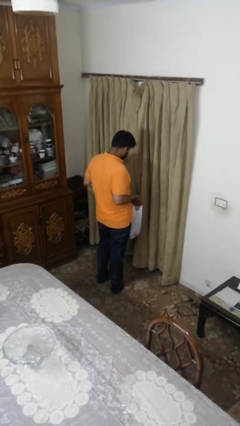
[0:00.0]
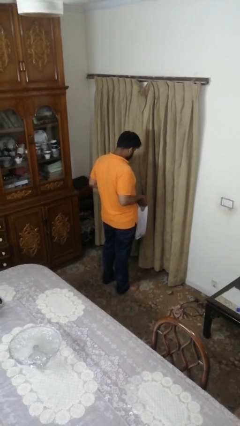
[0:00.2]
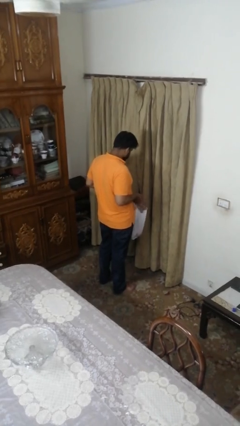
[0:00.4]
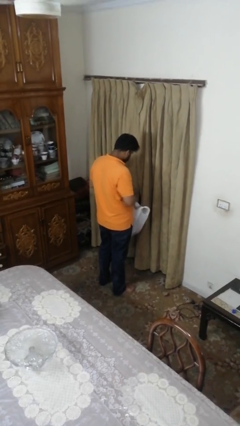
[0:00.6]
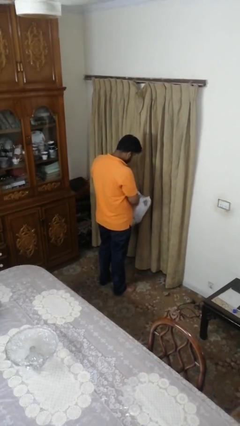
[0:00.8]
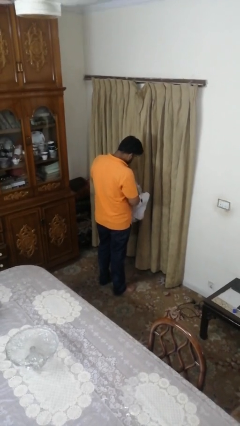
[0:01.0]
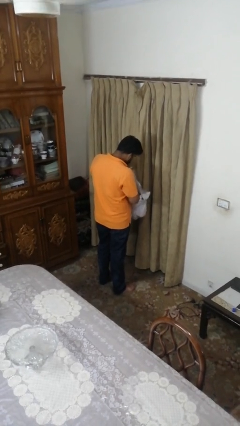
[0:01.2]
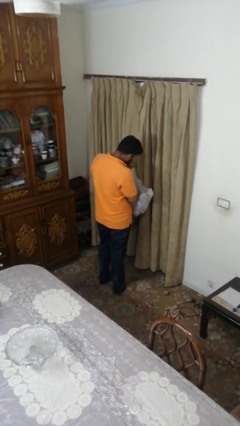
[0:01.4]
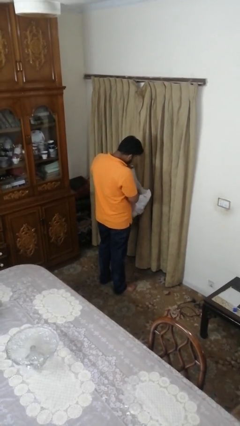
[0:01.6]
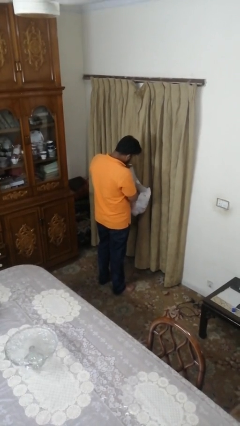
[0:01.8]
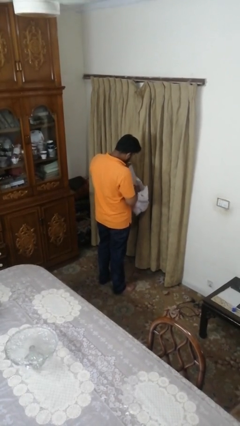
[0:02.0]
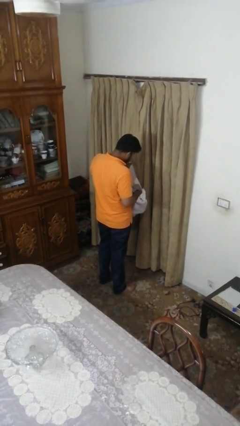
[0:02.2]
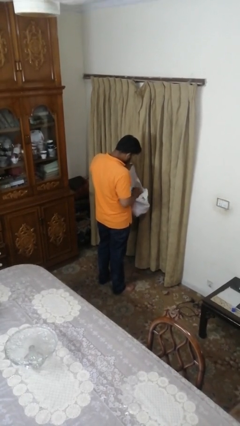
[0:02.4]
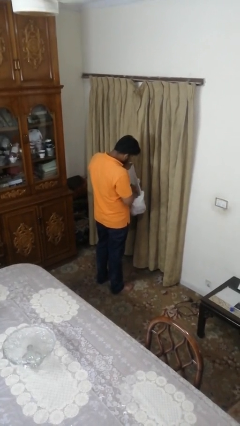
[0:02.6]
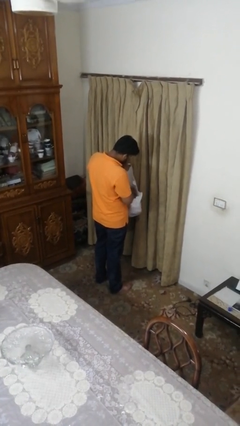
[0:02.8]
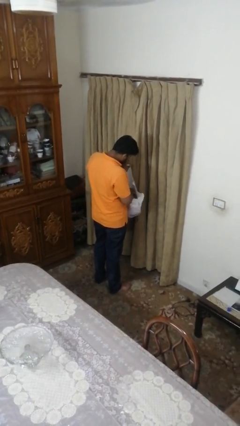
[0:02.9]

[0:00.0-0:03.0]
person searches in bag

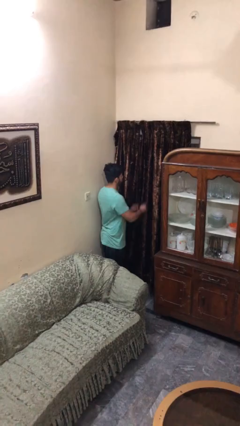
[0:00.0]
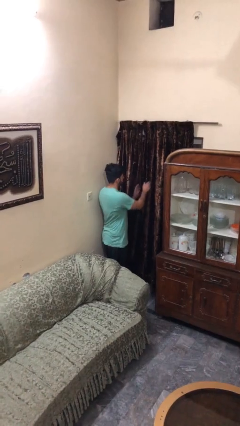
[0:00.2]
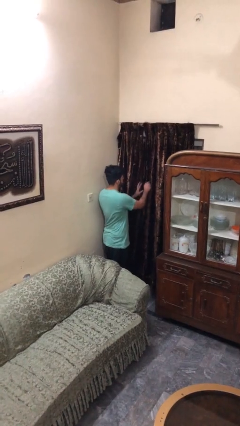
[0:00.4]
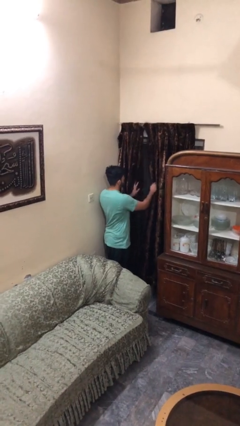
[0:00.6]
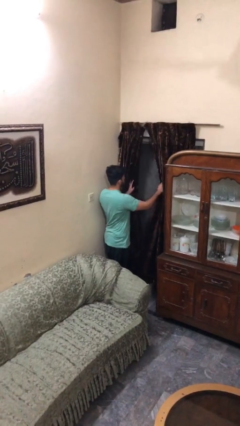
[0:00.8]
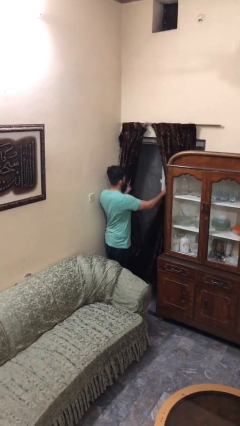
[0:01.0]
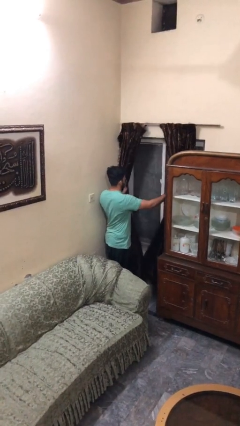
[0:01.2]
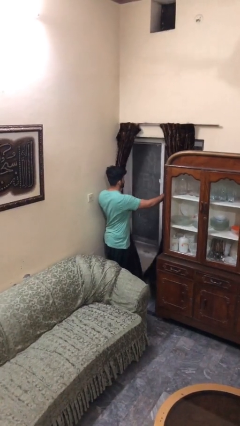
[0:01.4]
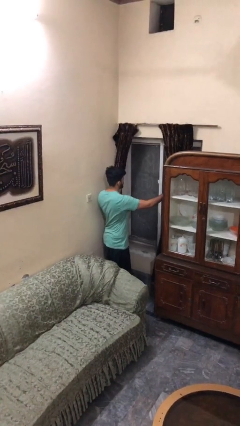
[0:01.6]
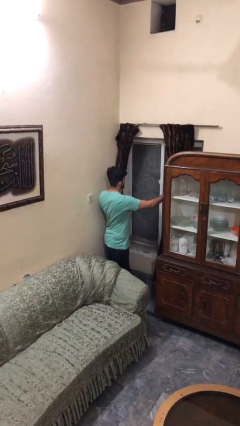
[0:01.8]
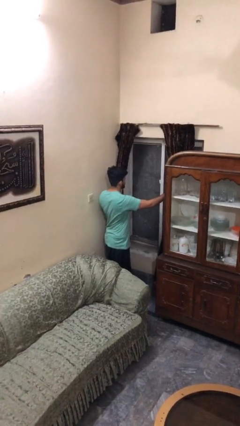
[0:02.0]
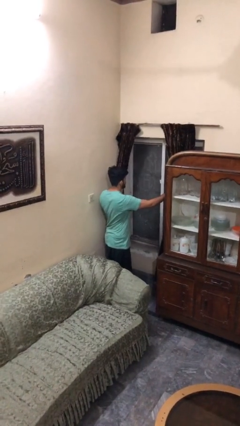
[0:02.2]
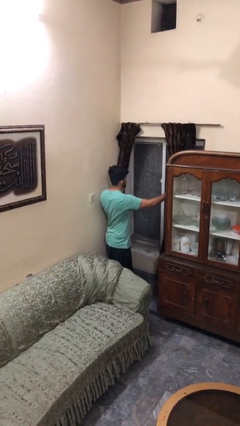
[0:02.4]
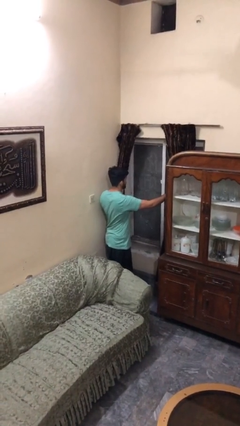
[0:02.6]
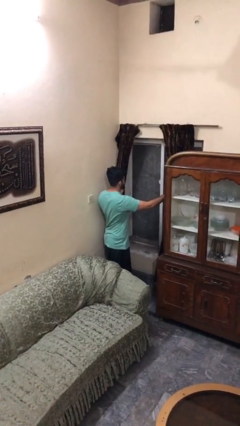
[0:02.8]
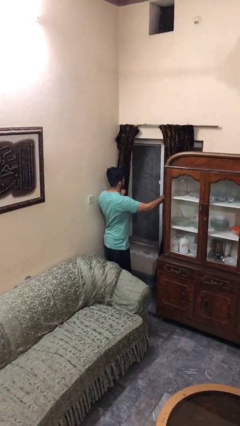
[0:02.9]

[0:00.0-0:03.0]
person opens curtains

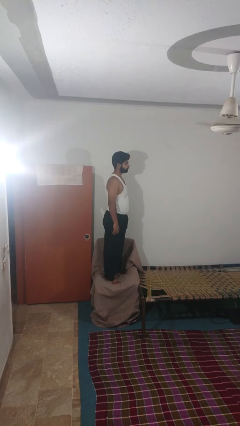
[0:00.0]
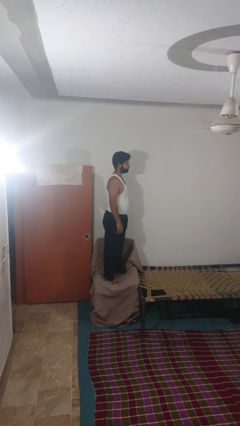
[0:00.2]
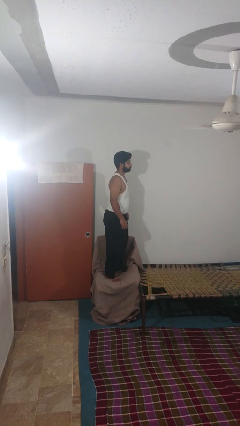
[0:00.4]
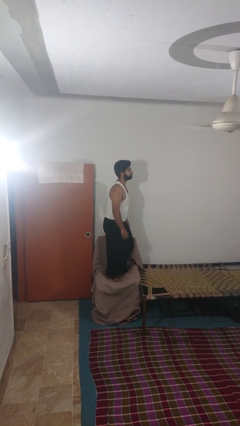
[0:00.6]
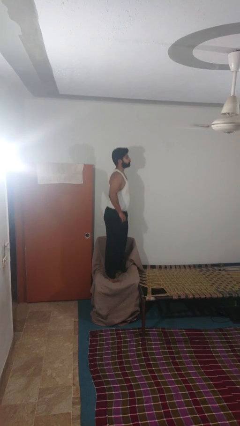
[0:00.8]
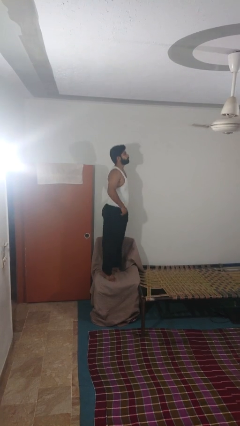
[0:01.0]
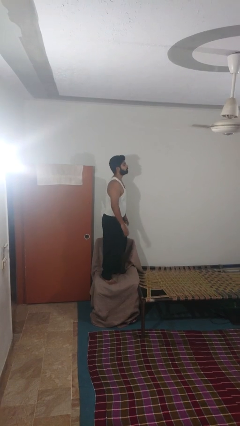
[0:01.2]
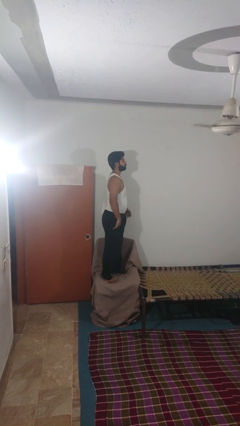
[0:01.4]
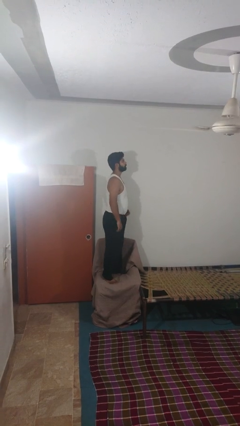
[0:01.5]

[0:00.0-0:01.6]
person jumps on couch

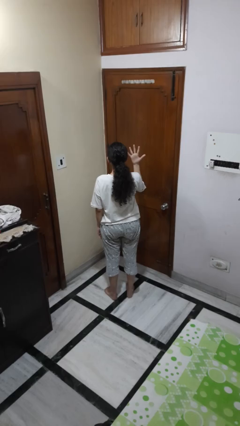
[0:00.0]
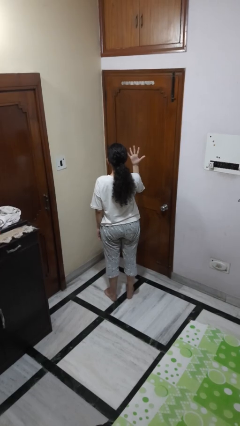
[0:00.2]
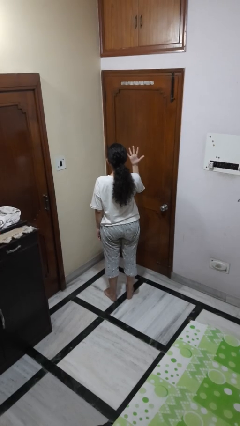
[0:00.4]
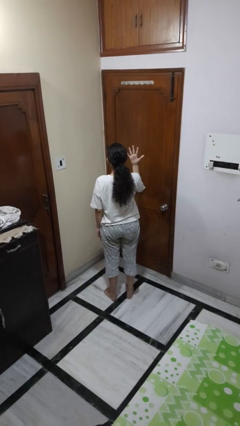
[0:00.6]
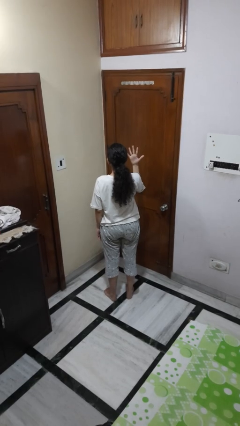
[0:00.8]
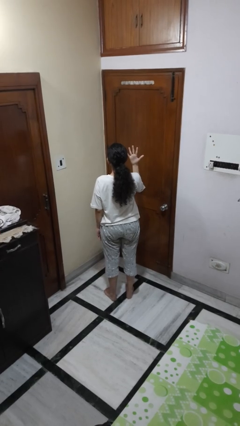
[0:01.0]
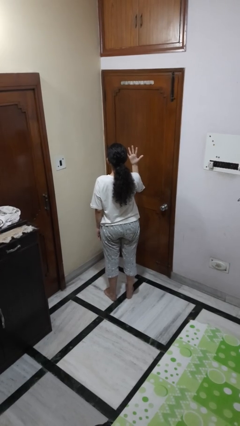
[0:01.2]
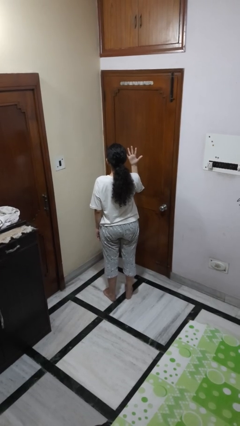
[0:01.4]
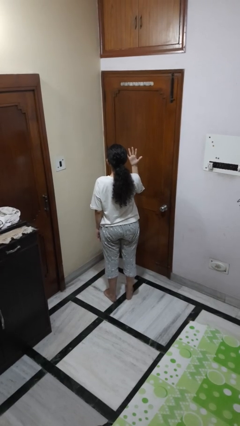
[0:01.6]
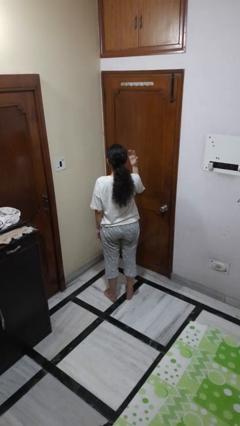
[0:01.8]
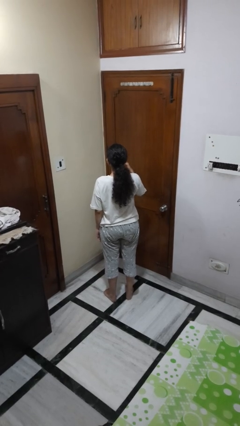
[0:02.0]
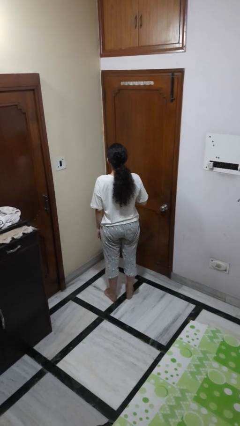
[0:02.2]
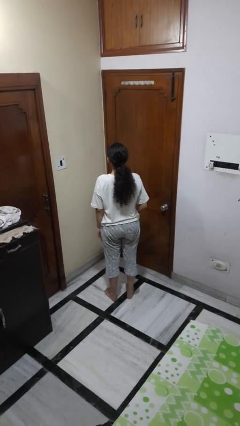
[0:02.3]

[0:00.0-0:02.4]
person gestures number five

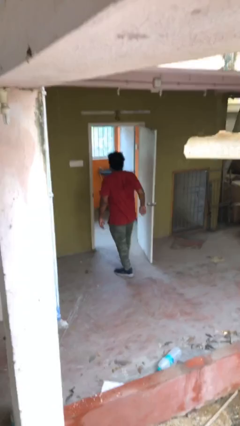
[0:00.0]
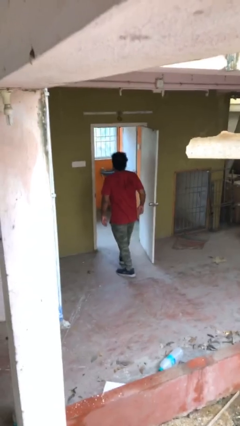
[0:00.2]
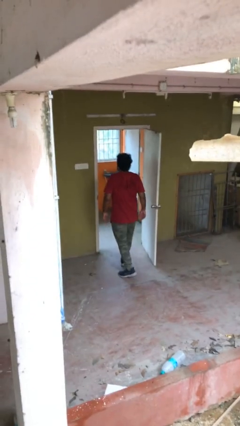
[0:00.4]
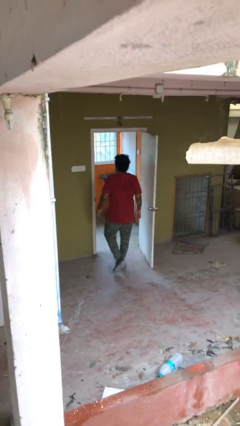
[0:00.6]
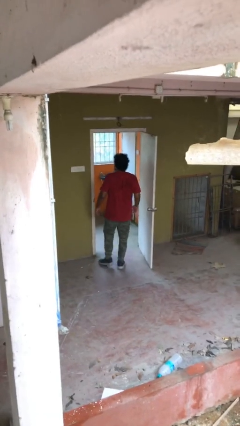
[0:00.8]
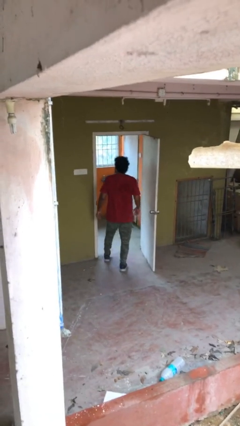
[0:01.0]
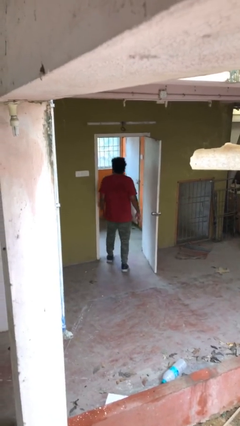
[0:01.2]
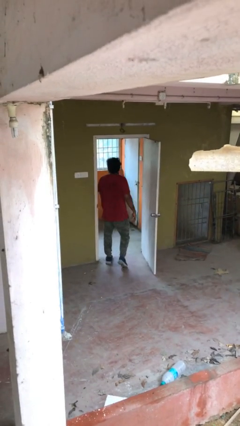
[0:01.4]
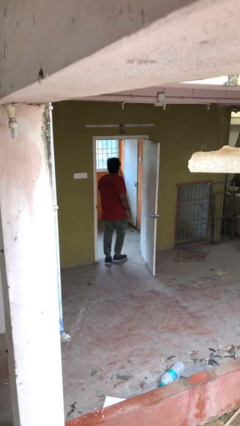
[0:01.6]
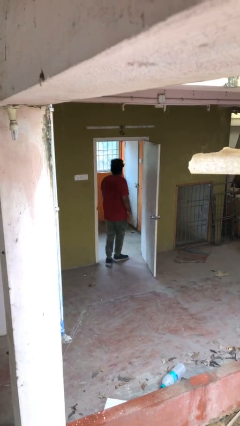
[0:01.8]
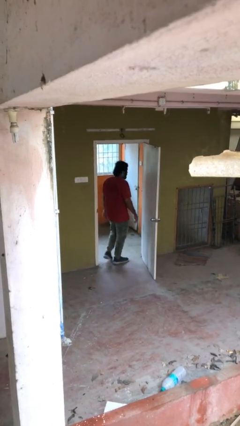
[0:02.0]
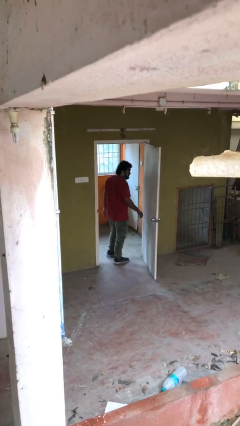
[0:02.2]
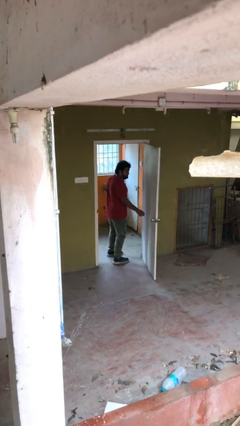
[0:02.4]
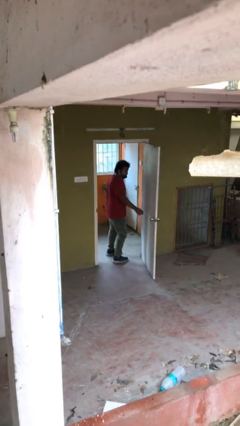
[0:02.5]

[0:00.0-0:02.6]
person exits scene through structure

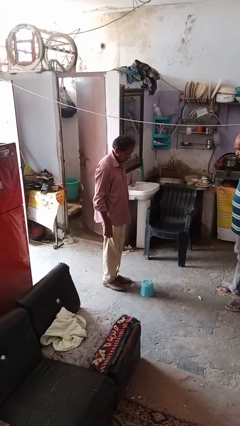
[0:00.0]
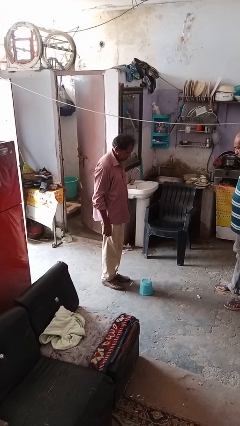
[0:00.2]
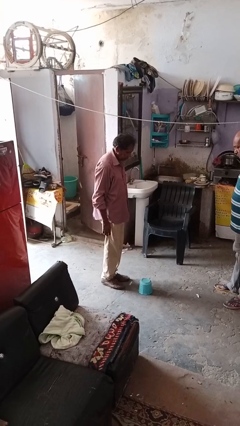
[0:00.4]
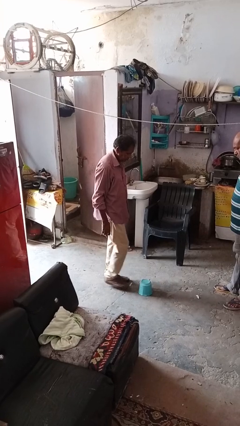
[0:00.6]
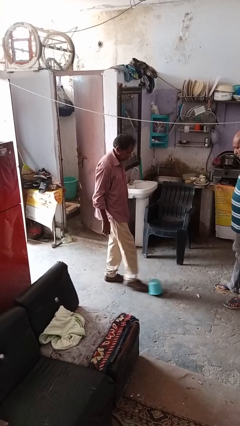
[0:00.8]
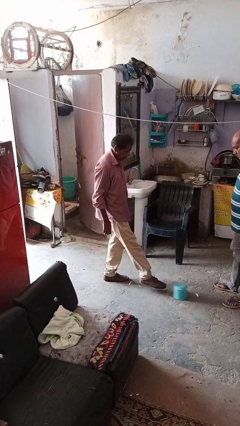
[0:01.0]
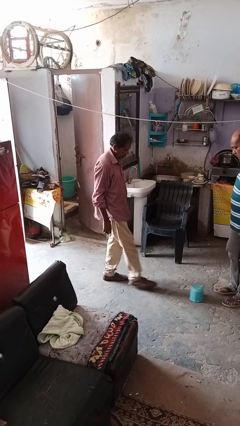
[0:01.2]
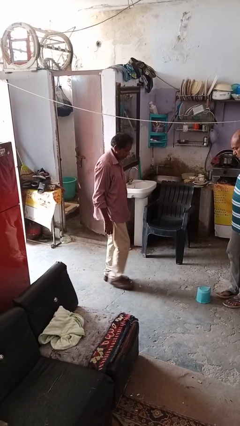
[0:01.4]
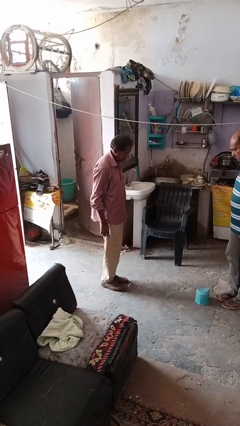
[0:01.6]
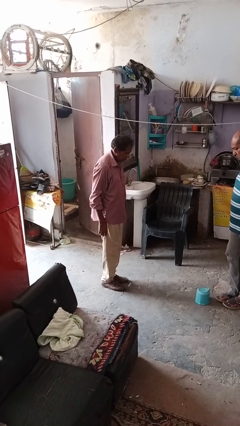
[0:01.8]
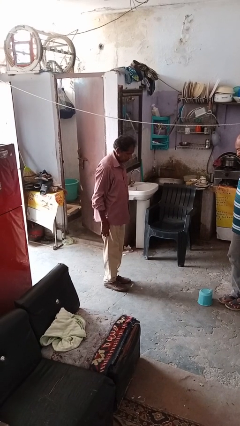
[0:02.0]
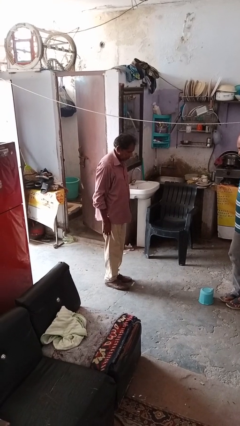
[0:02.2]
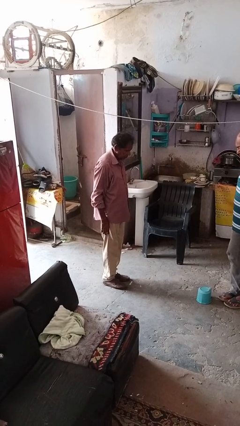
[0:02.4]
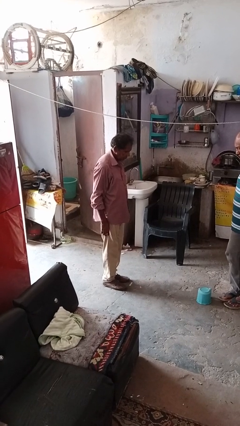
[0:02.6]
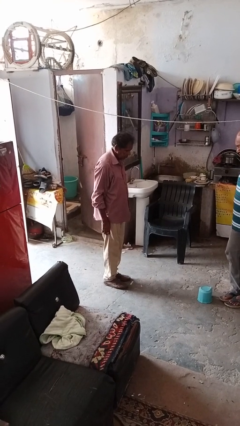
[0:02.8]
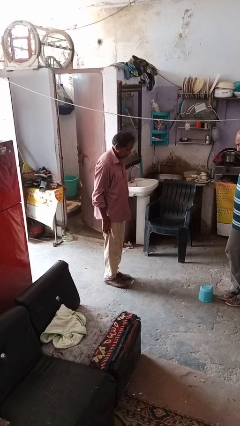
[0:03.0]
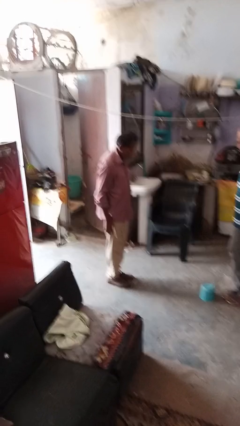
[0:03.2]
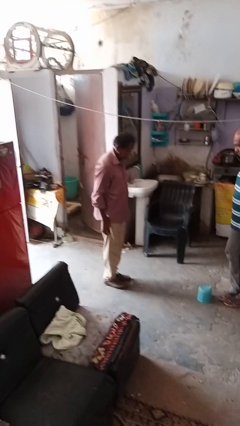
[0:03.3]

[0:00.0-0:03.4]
person kicks object to person

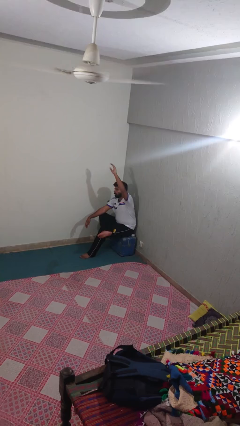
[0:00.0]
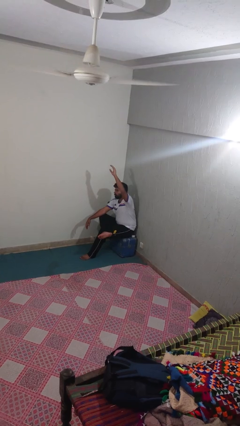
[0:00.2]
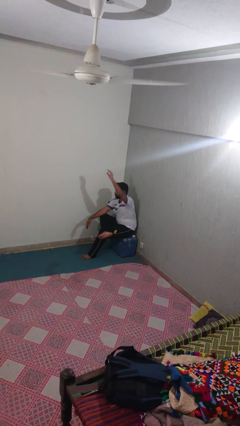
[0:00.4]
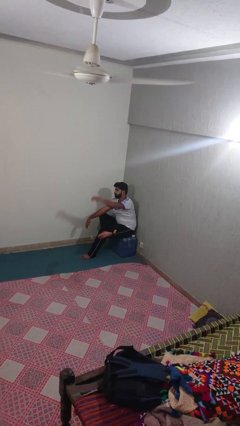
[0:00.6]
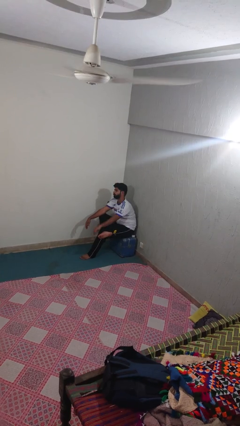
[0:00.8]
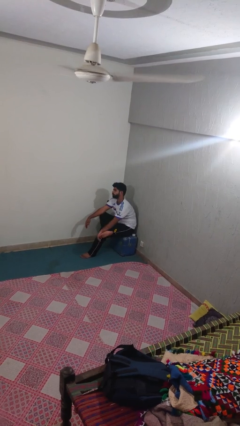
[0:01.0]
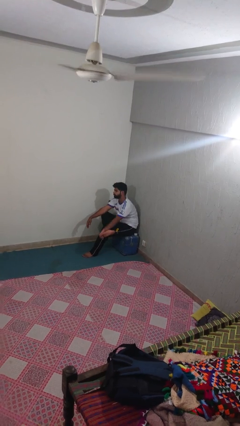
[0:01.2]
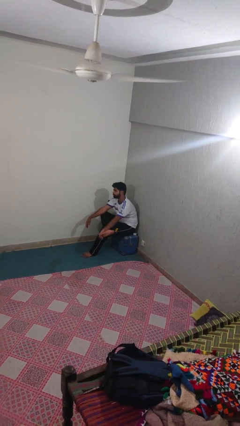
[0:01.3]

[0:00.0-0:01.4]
person gestures lower hand
